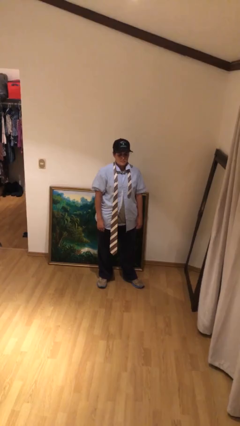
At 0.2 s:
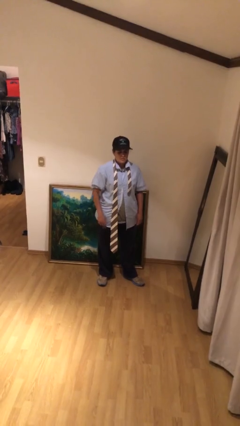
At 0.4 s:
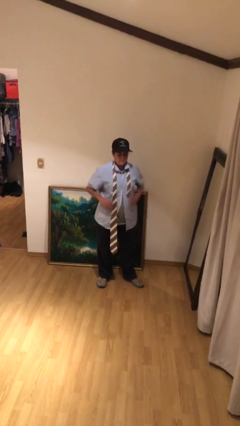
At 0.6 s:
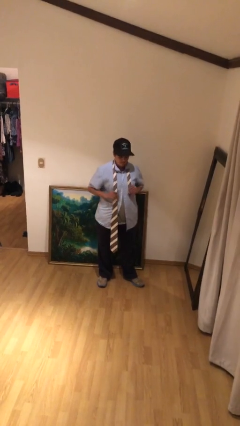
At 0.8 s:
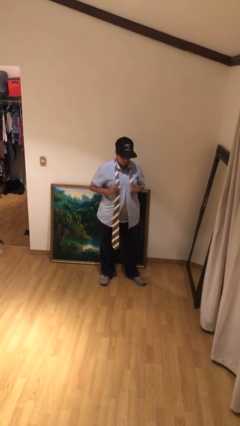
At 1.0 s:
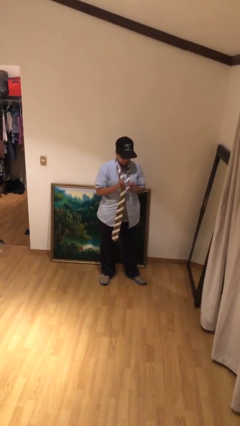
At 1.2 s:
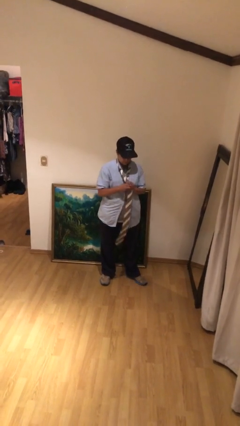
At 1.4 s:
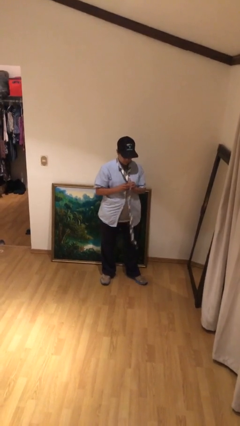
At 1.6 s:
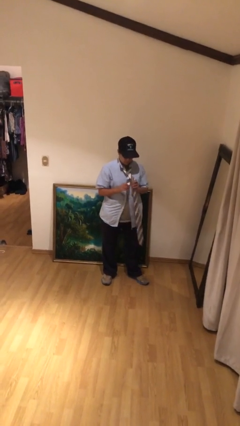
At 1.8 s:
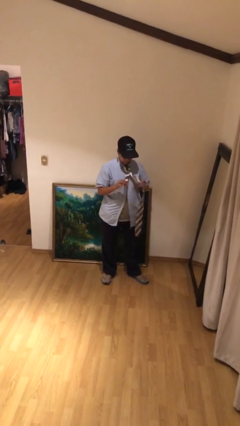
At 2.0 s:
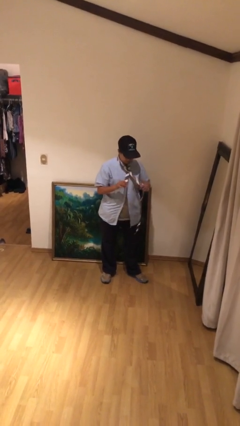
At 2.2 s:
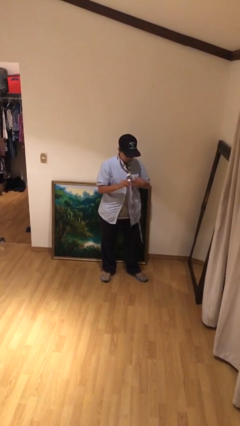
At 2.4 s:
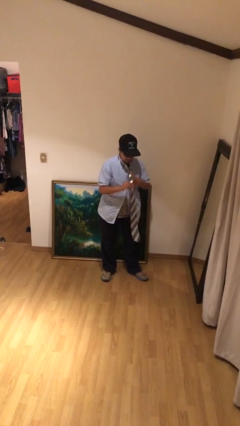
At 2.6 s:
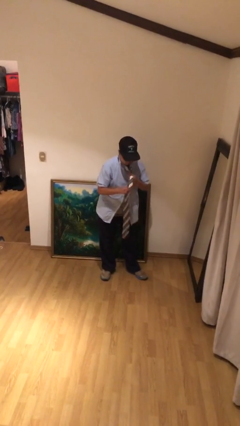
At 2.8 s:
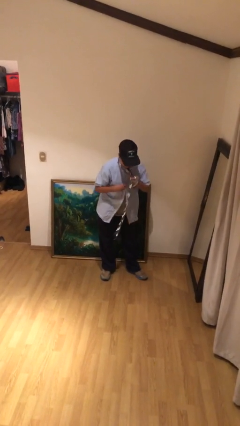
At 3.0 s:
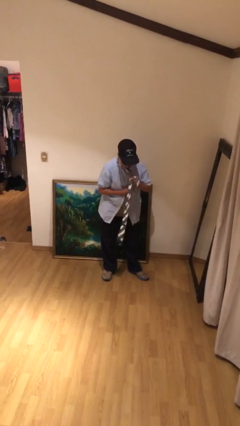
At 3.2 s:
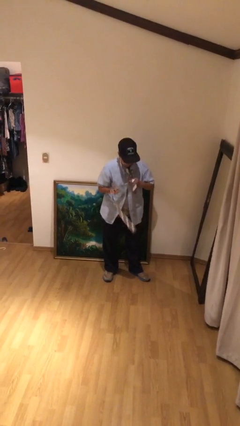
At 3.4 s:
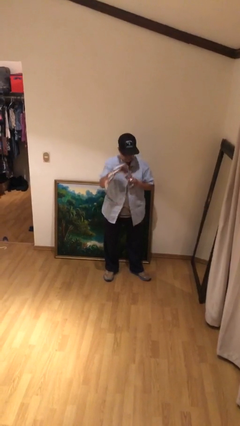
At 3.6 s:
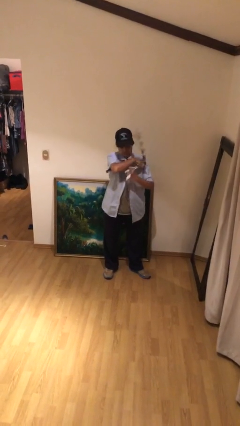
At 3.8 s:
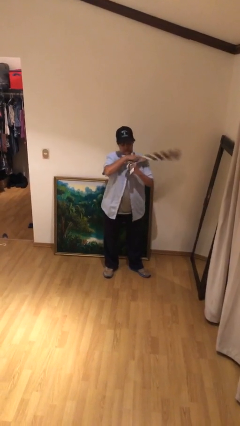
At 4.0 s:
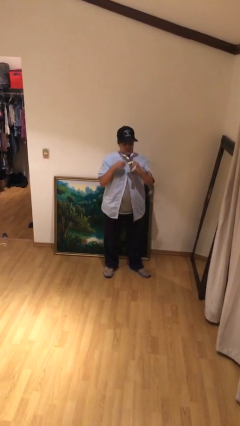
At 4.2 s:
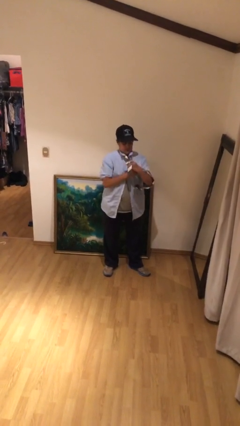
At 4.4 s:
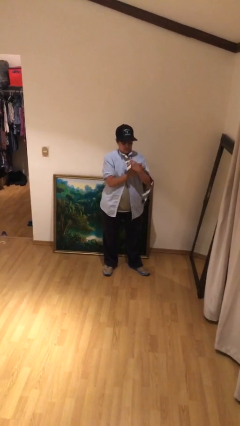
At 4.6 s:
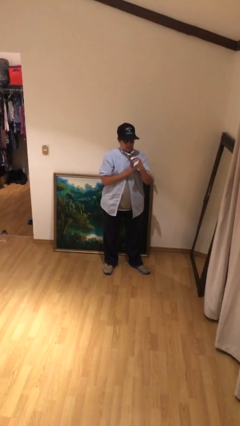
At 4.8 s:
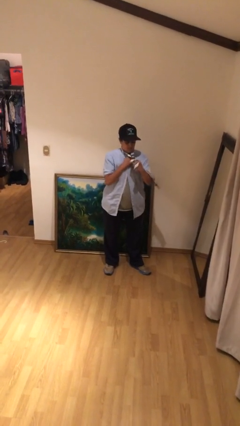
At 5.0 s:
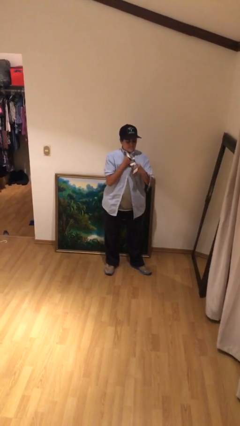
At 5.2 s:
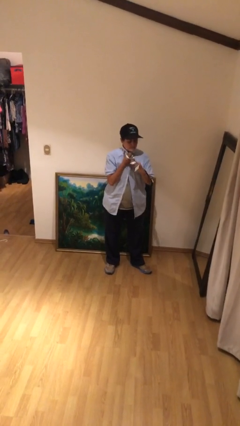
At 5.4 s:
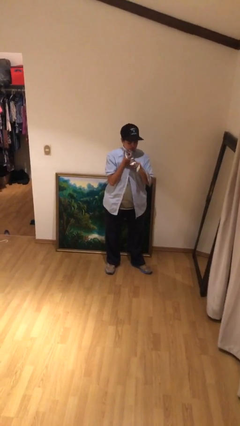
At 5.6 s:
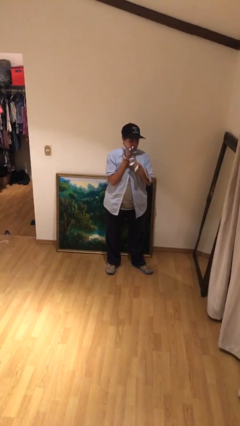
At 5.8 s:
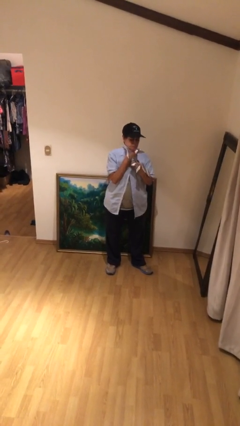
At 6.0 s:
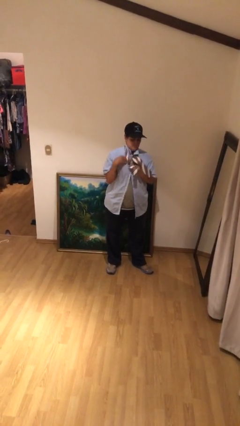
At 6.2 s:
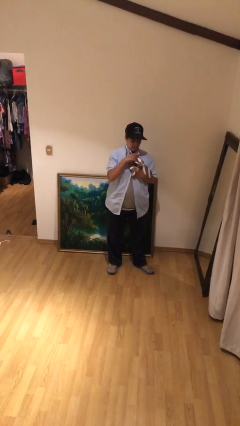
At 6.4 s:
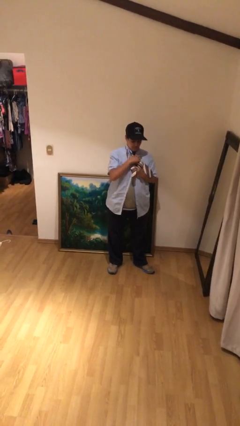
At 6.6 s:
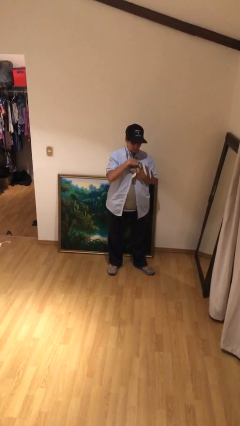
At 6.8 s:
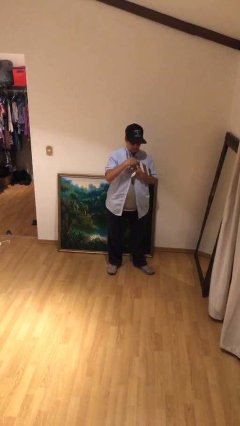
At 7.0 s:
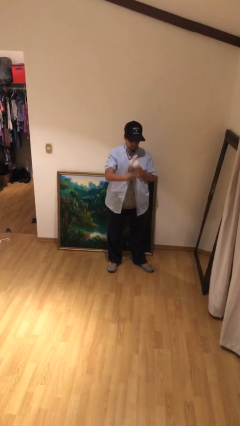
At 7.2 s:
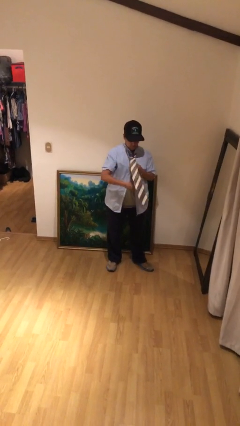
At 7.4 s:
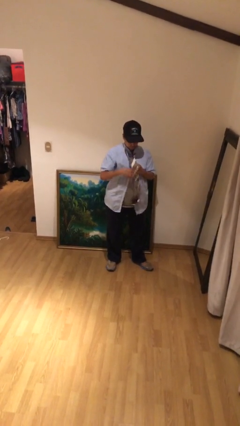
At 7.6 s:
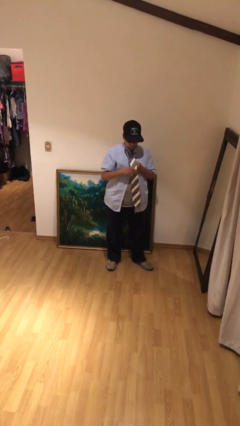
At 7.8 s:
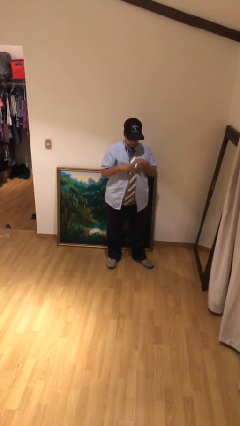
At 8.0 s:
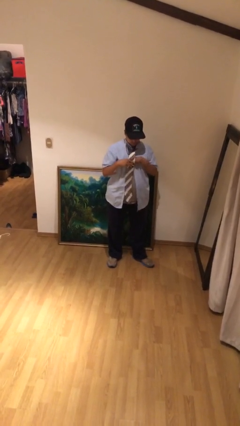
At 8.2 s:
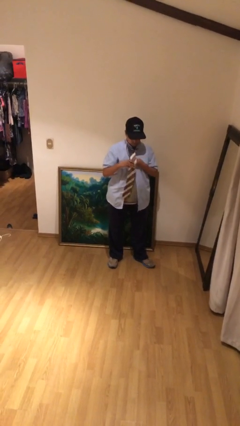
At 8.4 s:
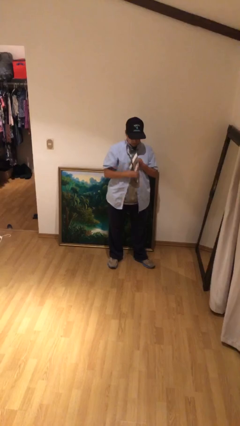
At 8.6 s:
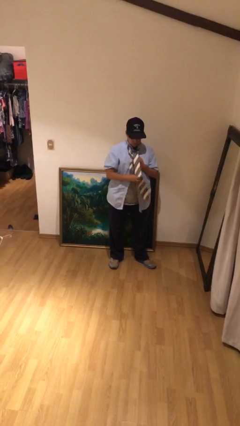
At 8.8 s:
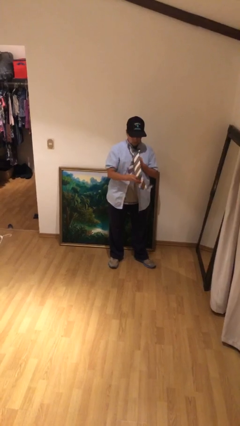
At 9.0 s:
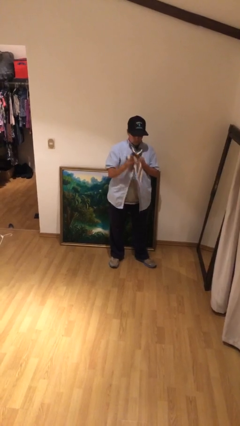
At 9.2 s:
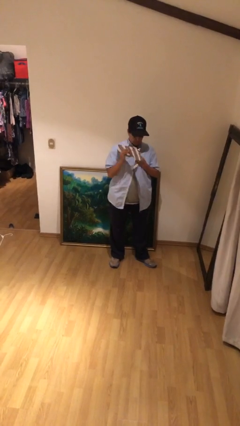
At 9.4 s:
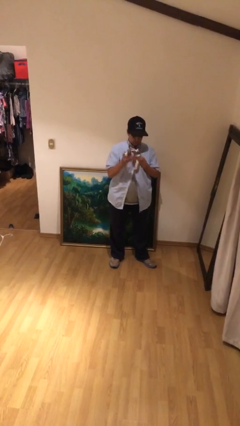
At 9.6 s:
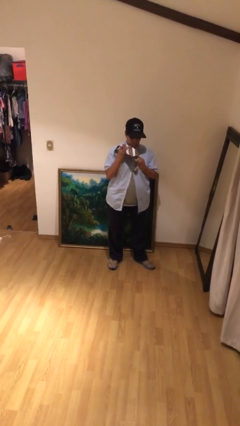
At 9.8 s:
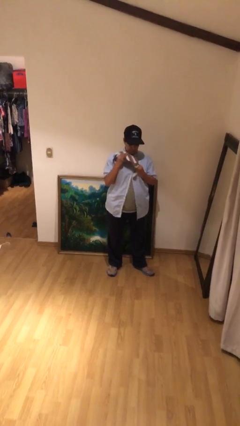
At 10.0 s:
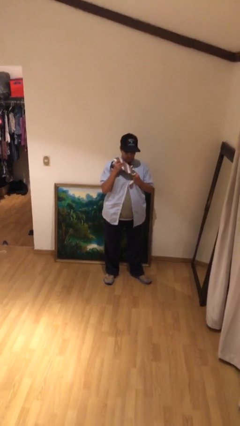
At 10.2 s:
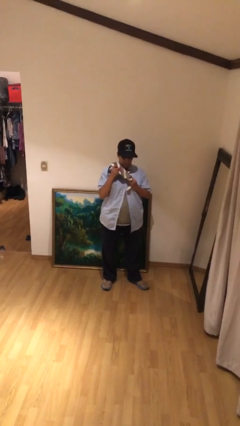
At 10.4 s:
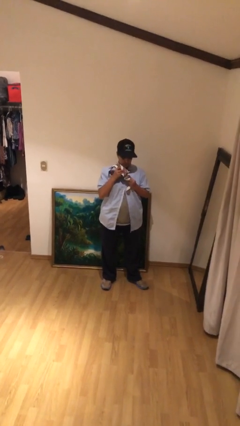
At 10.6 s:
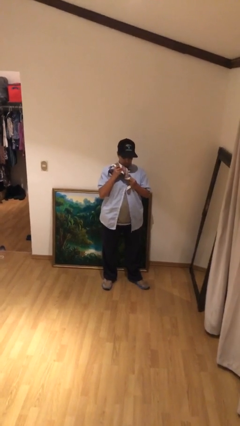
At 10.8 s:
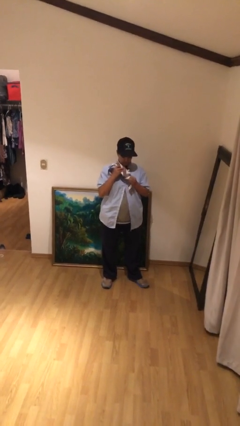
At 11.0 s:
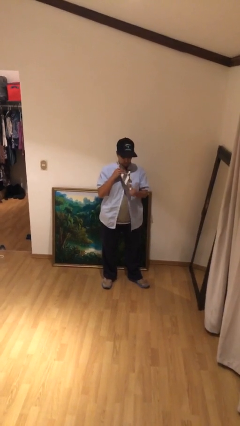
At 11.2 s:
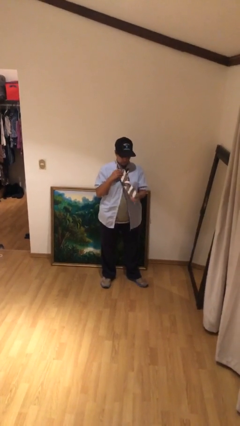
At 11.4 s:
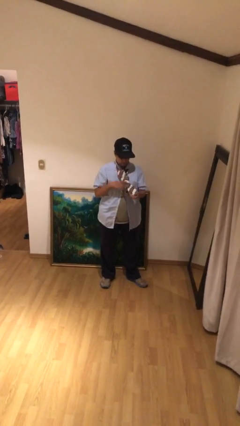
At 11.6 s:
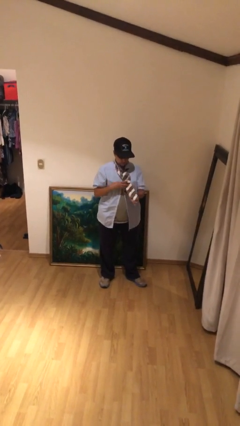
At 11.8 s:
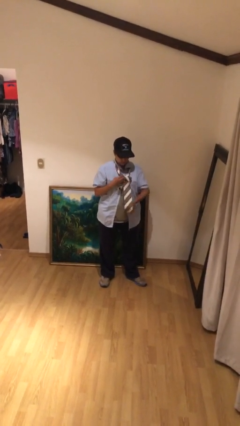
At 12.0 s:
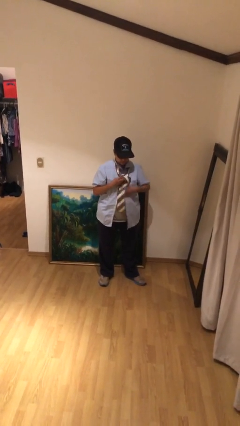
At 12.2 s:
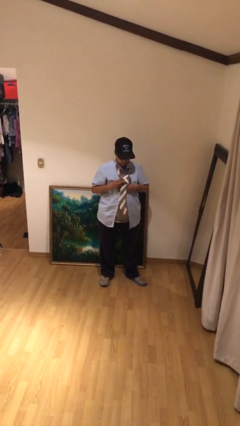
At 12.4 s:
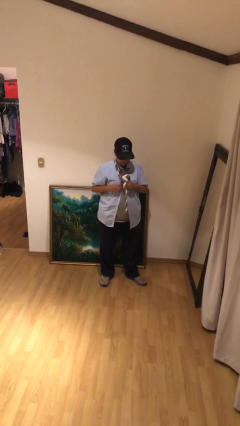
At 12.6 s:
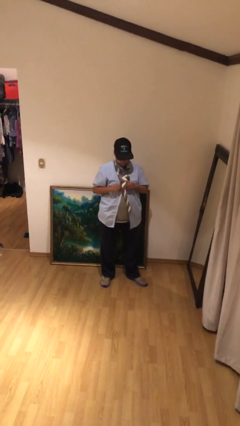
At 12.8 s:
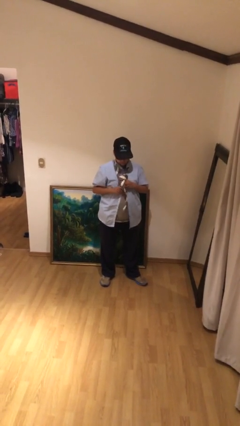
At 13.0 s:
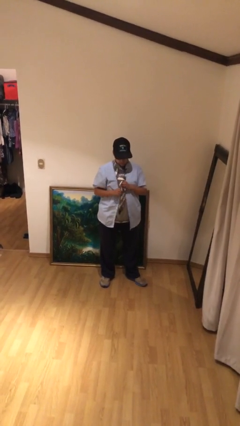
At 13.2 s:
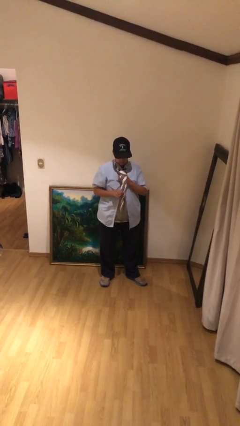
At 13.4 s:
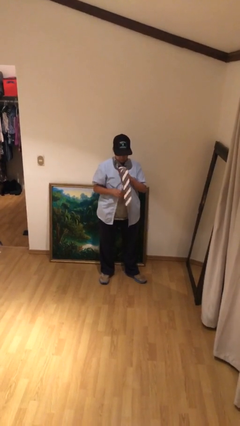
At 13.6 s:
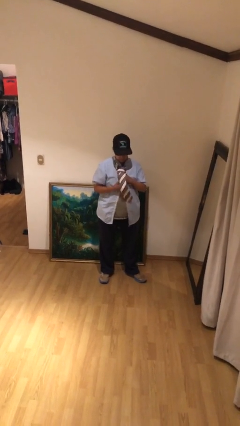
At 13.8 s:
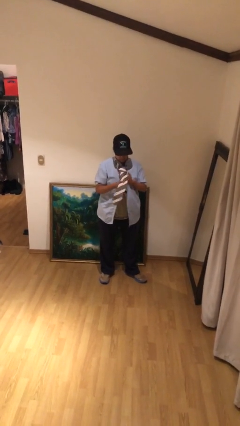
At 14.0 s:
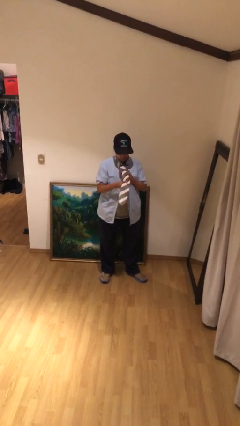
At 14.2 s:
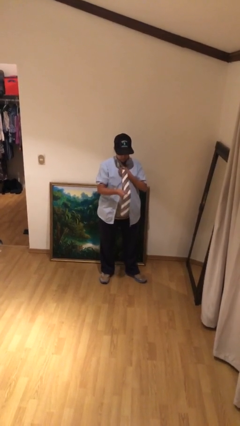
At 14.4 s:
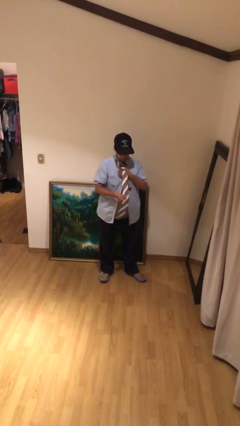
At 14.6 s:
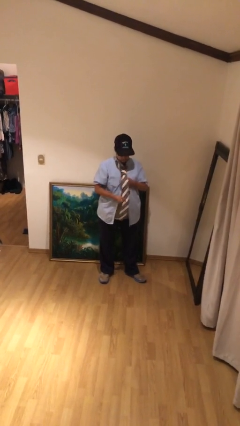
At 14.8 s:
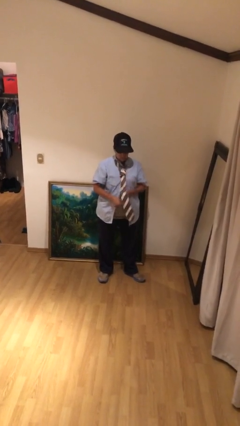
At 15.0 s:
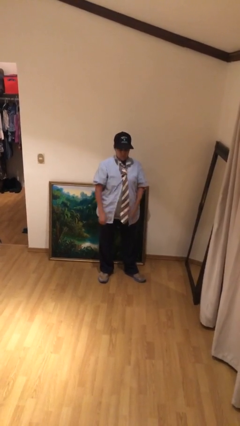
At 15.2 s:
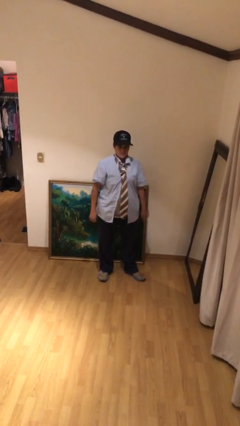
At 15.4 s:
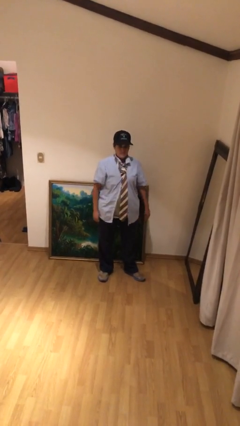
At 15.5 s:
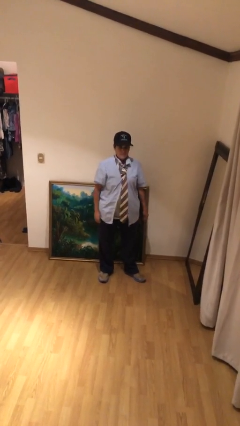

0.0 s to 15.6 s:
person puts on necktie

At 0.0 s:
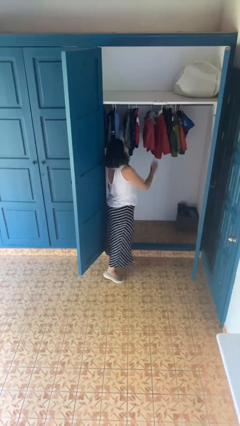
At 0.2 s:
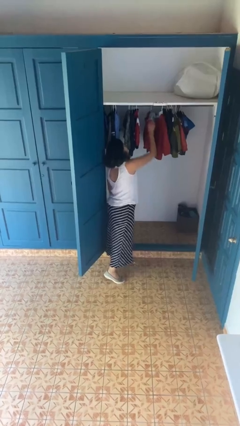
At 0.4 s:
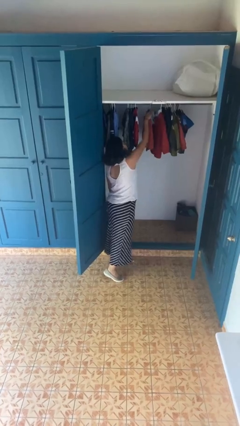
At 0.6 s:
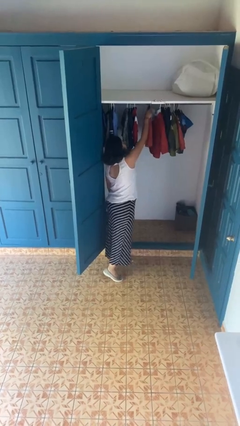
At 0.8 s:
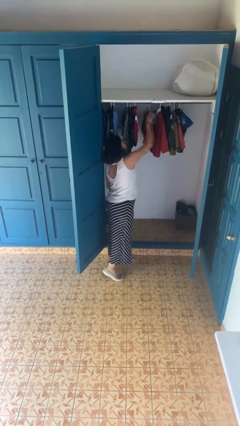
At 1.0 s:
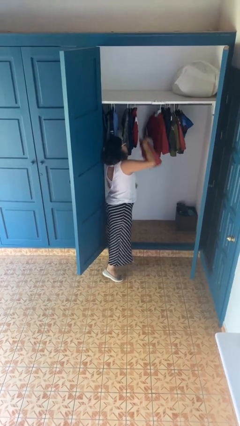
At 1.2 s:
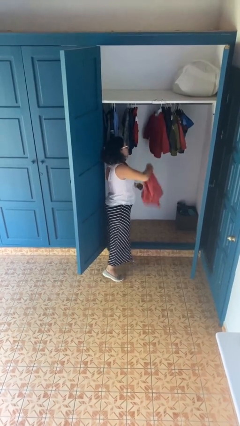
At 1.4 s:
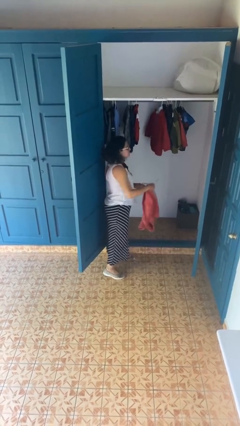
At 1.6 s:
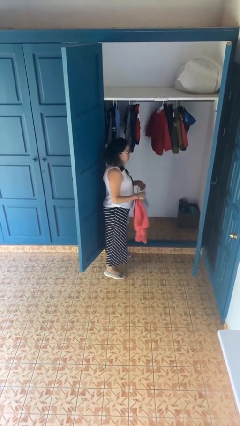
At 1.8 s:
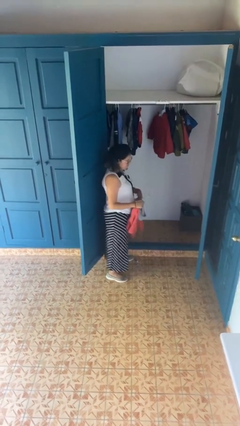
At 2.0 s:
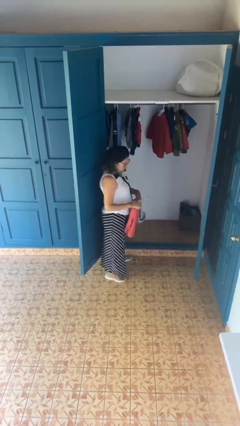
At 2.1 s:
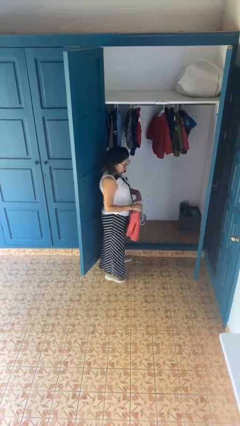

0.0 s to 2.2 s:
person takes clothes from closet

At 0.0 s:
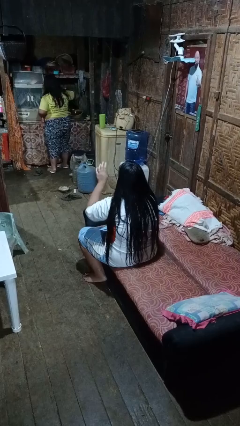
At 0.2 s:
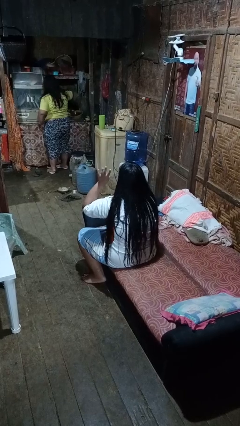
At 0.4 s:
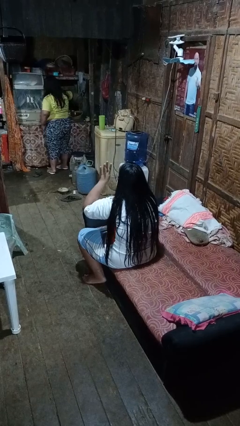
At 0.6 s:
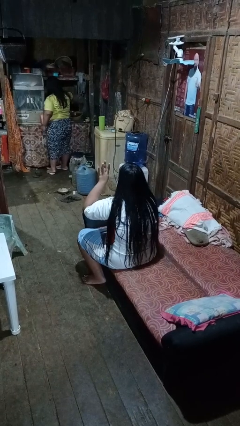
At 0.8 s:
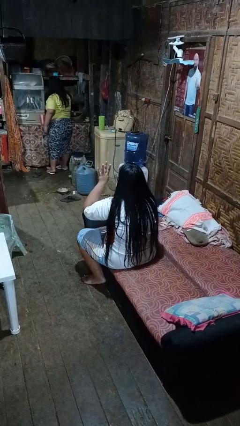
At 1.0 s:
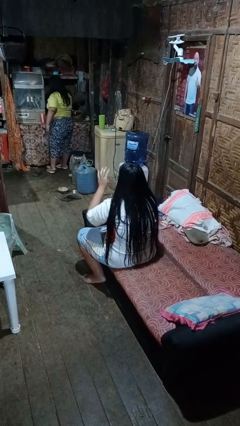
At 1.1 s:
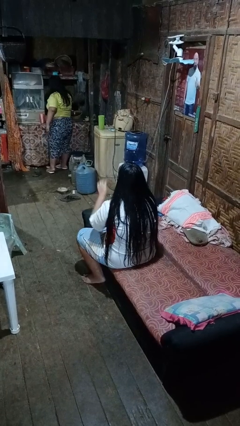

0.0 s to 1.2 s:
person gestures number four
